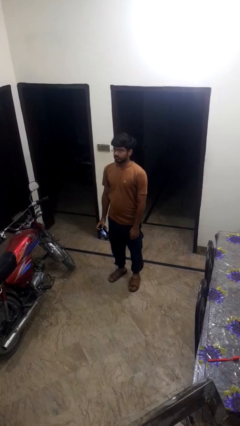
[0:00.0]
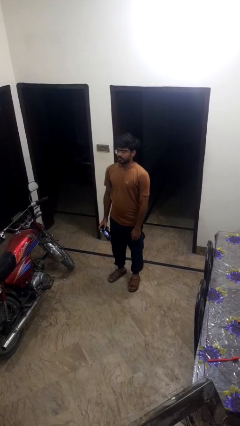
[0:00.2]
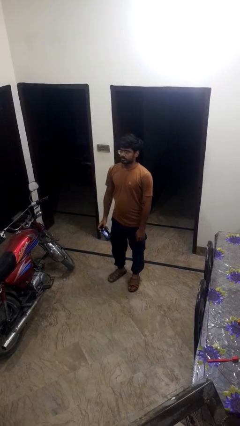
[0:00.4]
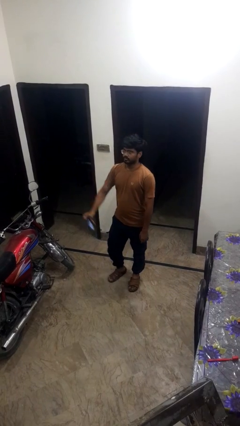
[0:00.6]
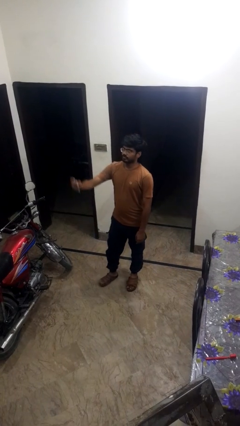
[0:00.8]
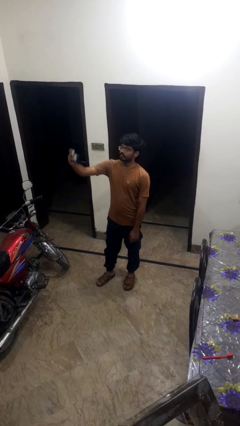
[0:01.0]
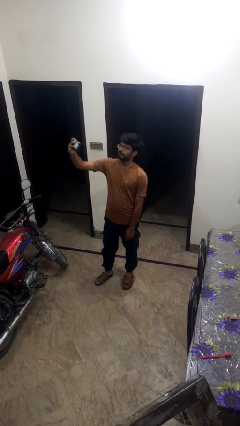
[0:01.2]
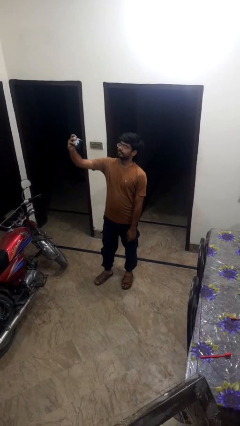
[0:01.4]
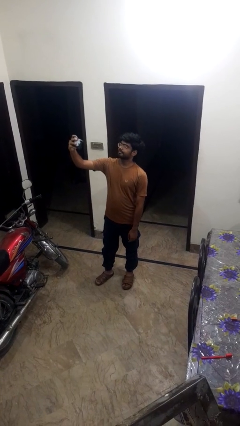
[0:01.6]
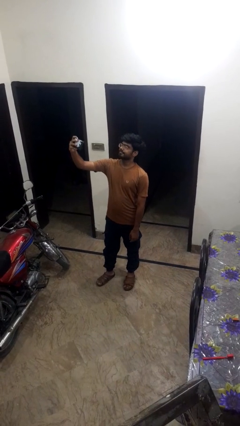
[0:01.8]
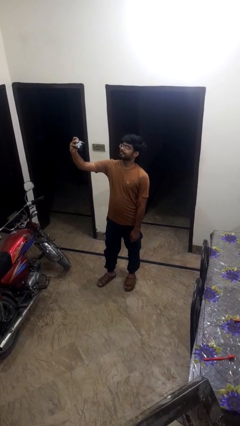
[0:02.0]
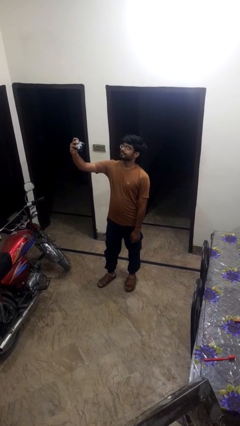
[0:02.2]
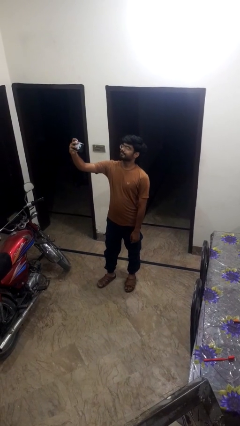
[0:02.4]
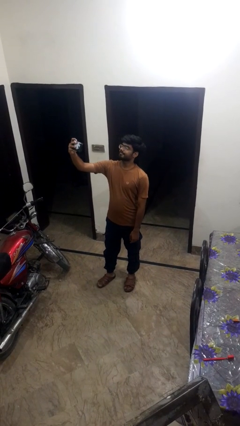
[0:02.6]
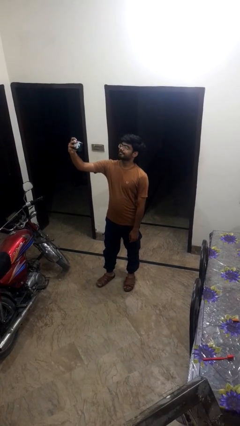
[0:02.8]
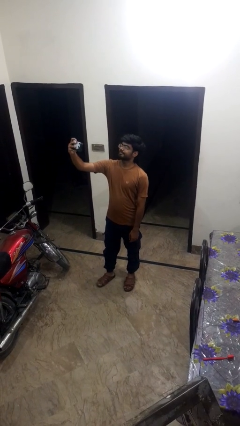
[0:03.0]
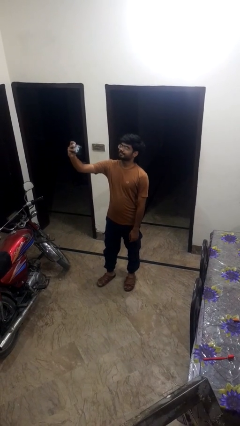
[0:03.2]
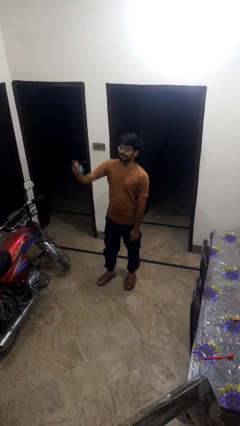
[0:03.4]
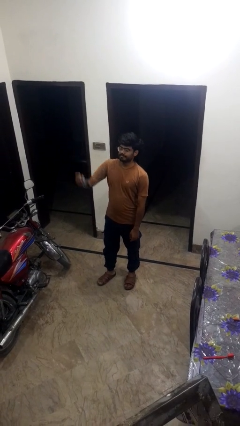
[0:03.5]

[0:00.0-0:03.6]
person takes selfie

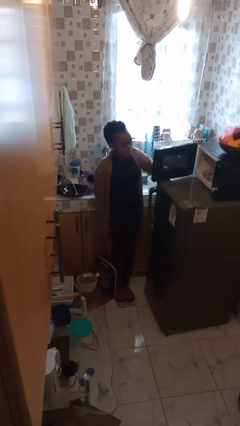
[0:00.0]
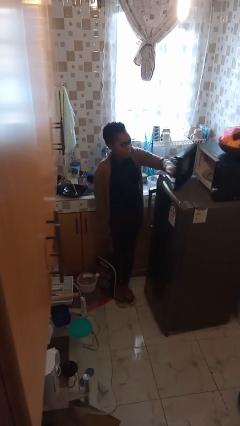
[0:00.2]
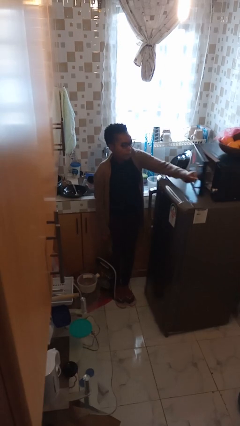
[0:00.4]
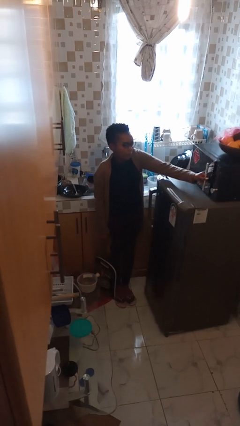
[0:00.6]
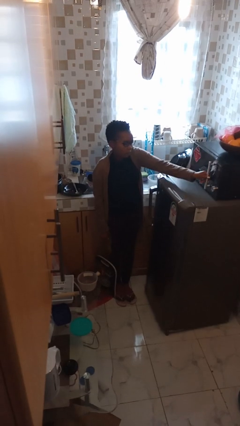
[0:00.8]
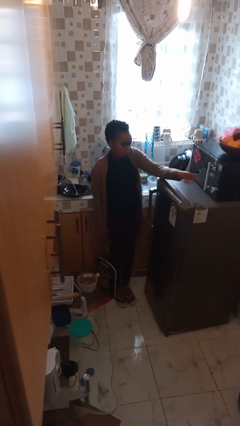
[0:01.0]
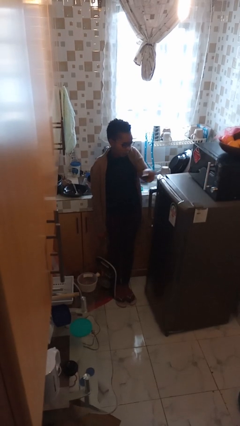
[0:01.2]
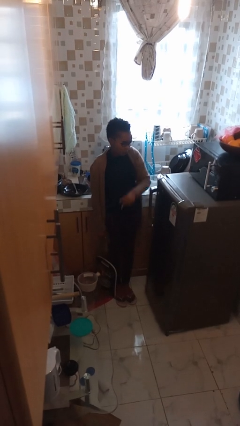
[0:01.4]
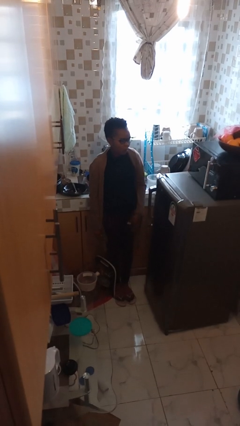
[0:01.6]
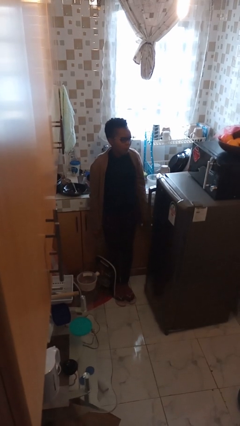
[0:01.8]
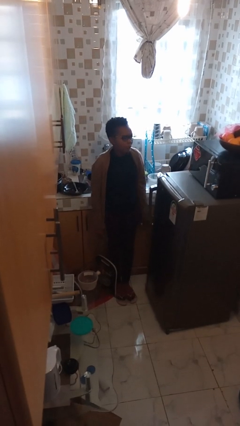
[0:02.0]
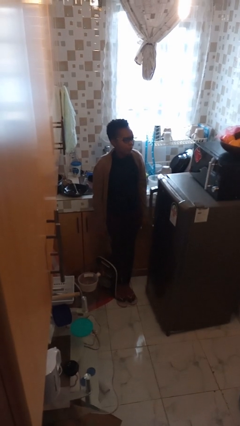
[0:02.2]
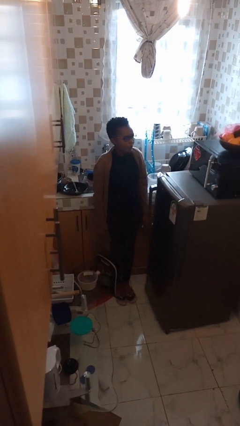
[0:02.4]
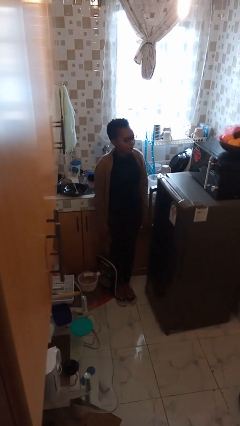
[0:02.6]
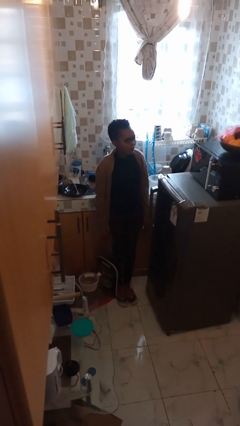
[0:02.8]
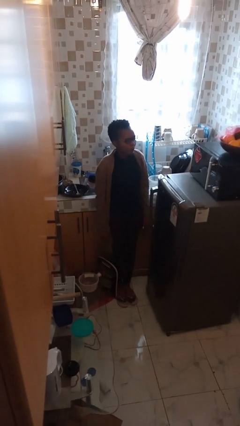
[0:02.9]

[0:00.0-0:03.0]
person closes microwave

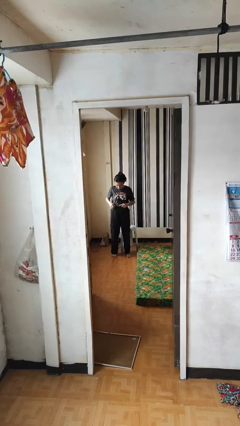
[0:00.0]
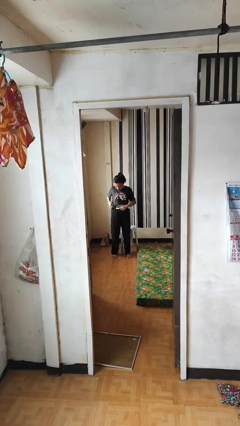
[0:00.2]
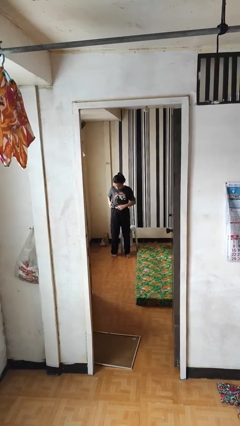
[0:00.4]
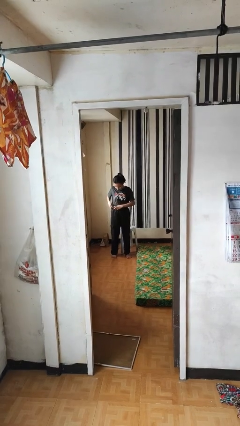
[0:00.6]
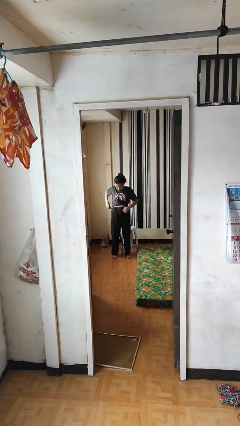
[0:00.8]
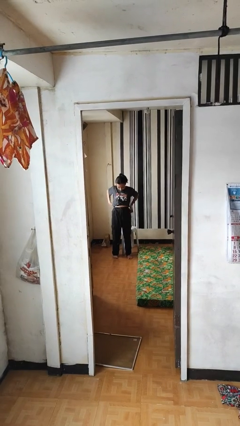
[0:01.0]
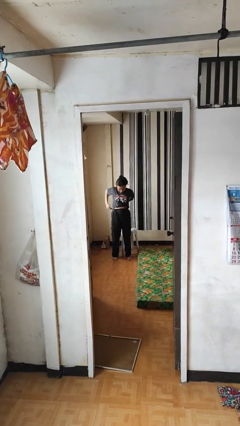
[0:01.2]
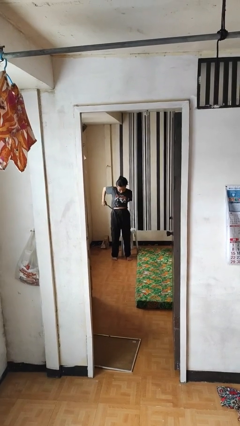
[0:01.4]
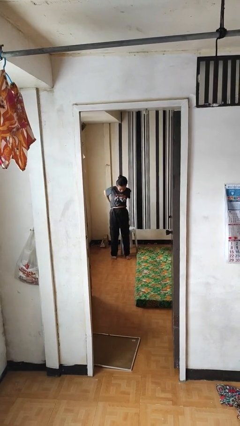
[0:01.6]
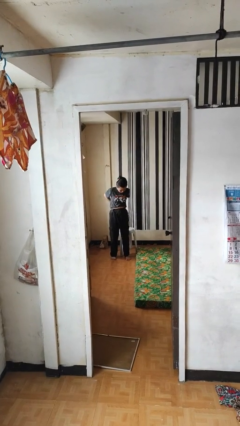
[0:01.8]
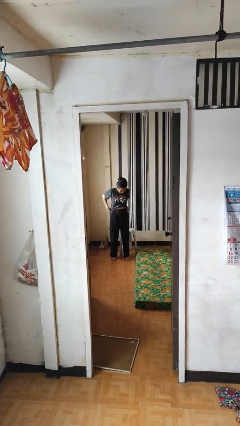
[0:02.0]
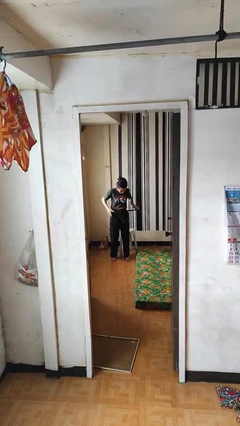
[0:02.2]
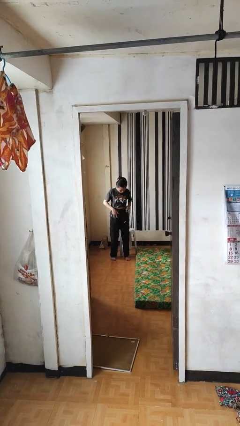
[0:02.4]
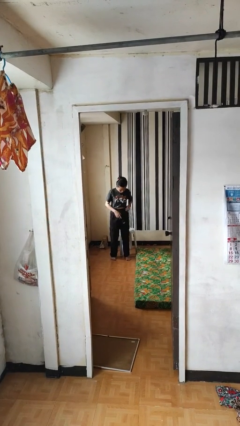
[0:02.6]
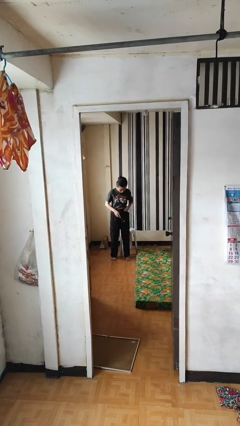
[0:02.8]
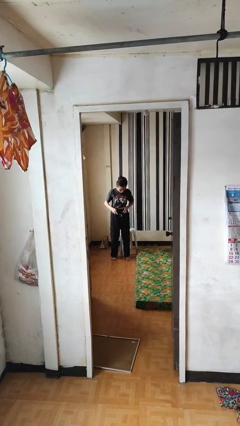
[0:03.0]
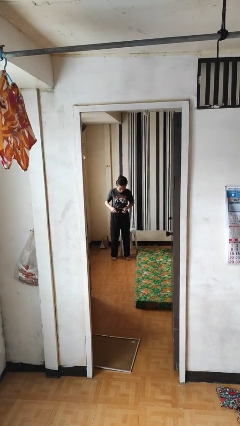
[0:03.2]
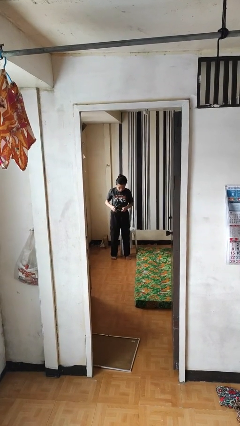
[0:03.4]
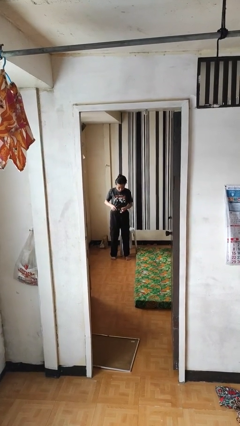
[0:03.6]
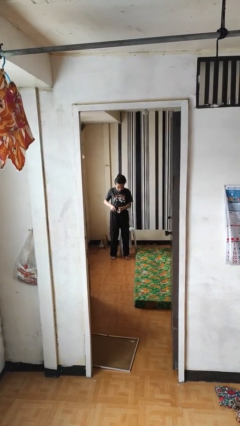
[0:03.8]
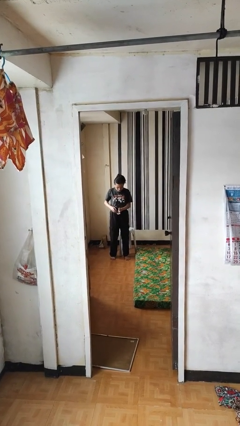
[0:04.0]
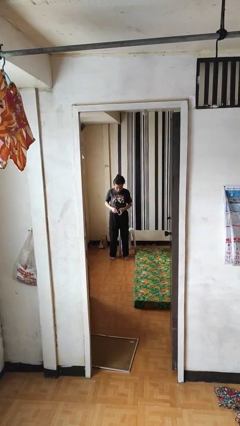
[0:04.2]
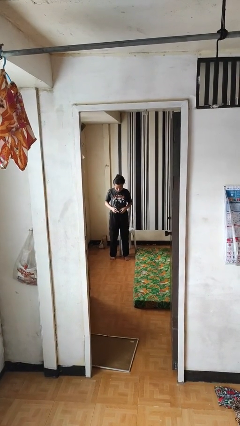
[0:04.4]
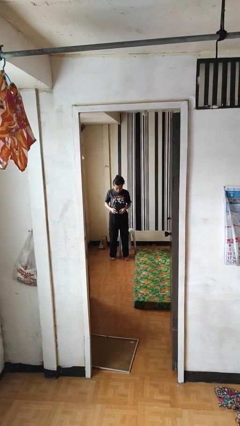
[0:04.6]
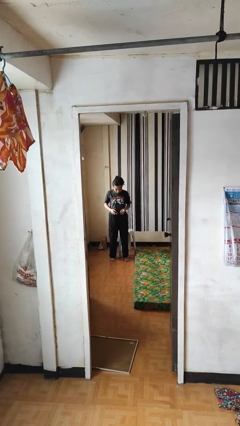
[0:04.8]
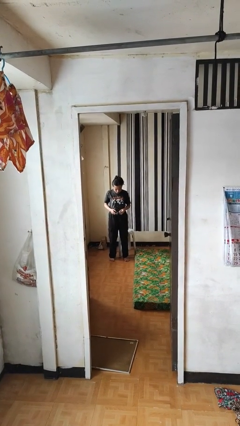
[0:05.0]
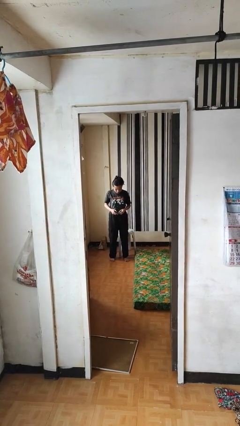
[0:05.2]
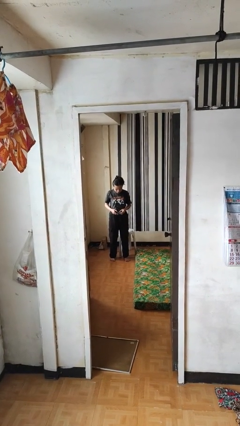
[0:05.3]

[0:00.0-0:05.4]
person puts on belt

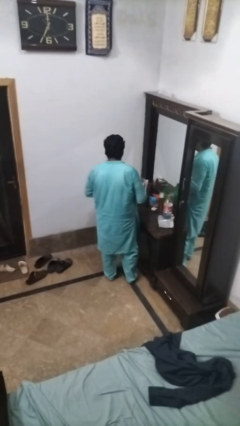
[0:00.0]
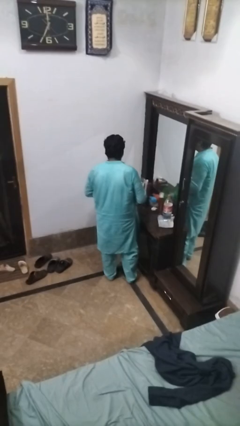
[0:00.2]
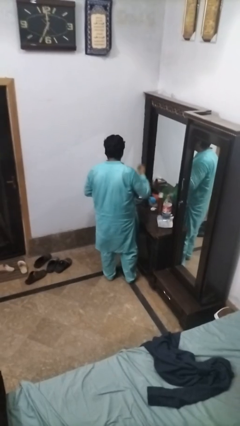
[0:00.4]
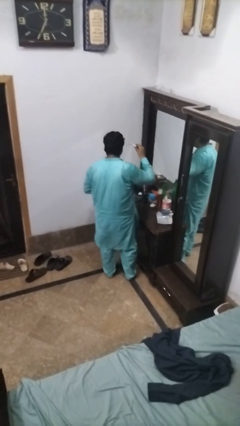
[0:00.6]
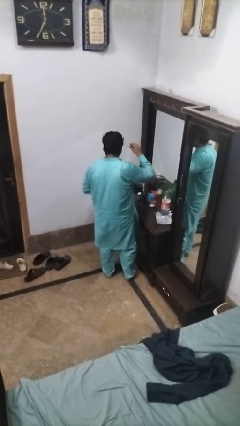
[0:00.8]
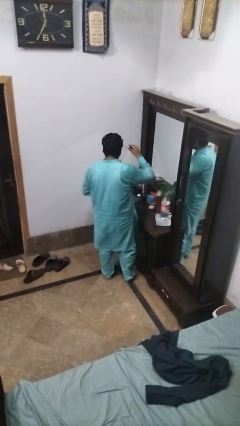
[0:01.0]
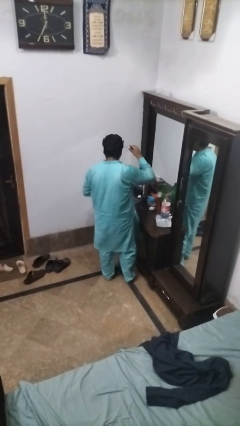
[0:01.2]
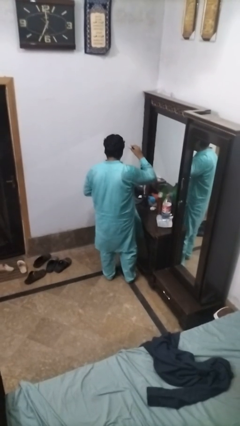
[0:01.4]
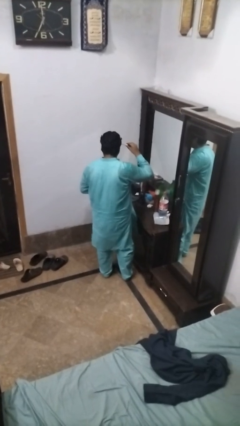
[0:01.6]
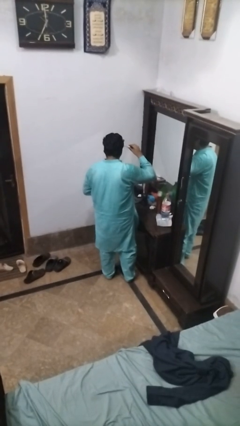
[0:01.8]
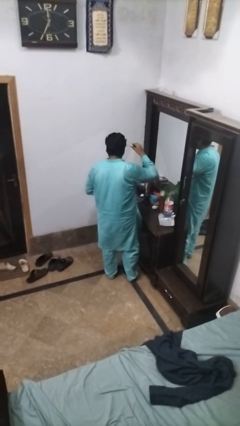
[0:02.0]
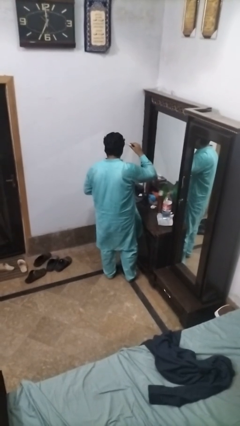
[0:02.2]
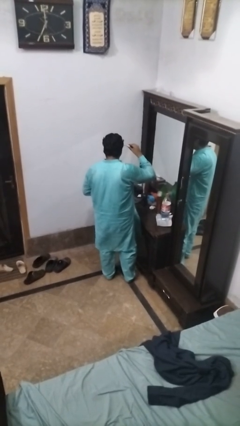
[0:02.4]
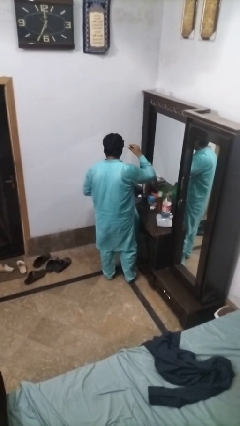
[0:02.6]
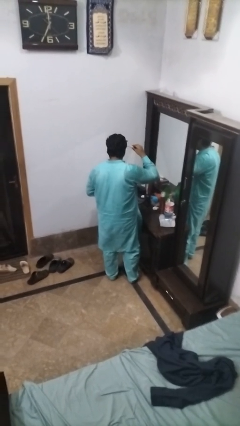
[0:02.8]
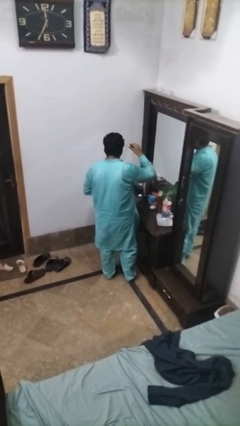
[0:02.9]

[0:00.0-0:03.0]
person applies eye makeup

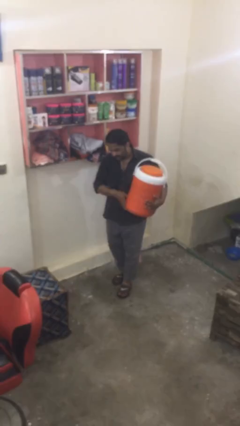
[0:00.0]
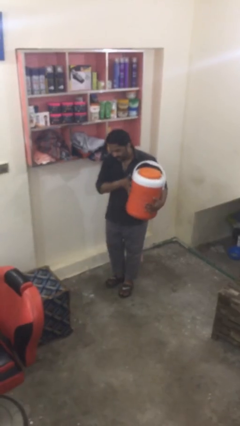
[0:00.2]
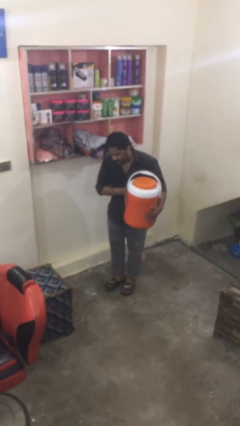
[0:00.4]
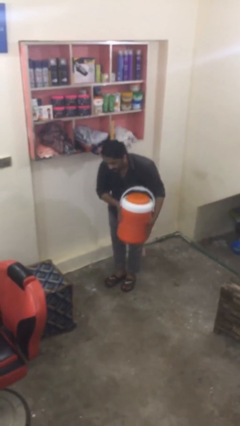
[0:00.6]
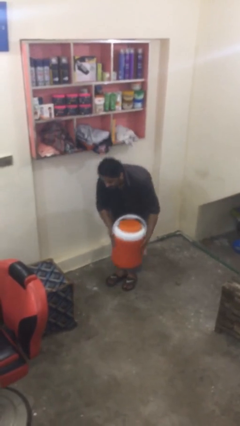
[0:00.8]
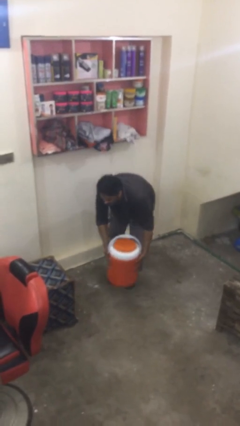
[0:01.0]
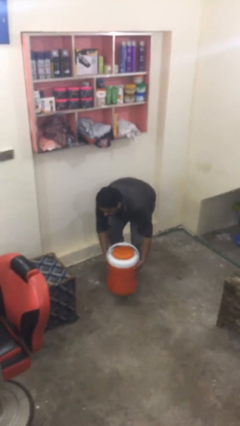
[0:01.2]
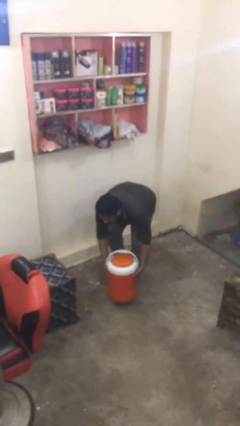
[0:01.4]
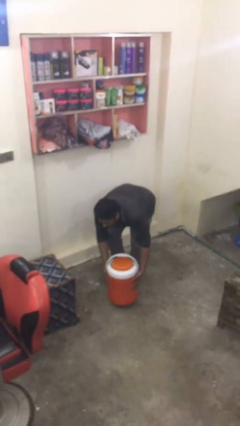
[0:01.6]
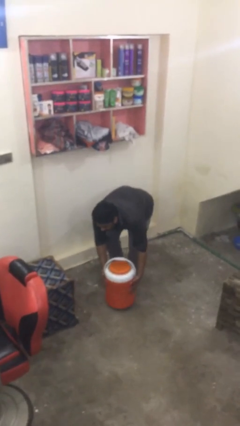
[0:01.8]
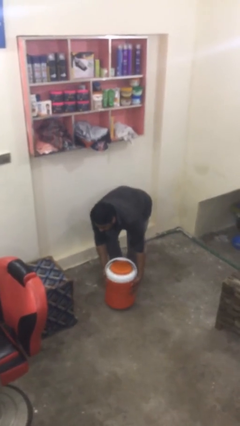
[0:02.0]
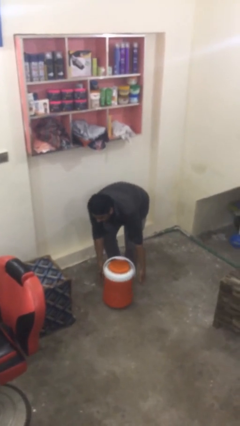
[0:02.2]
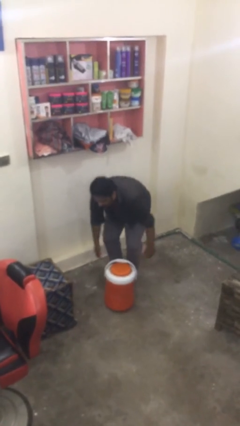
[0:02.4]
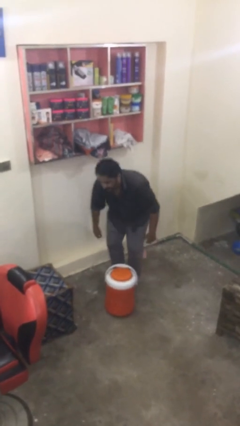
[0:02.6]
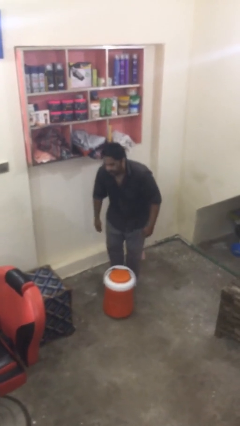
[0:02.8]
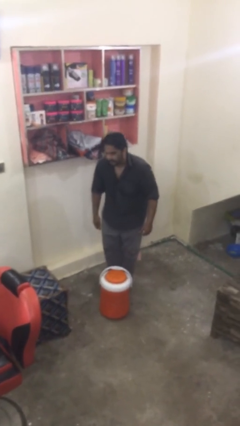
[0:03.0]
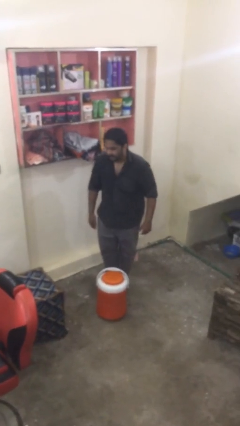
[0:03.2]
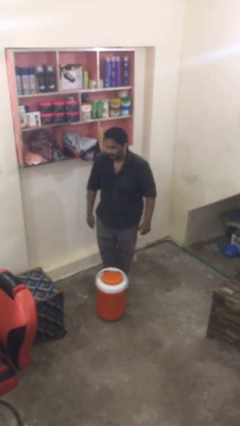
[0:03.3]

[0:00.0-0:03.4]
person puts down object on floor
